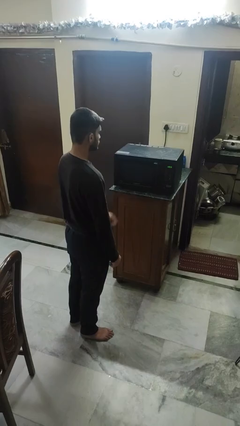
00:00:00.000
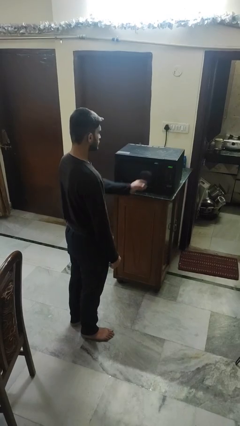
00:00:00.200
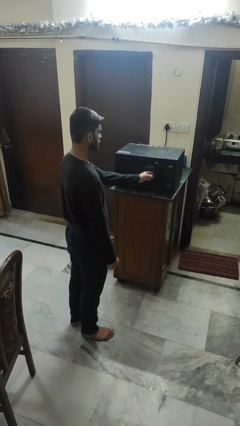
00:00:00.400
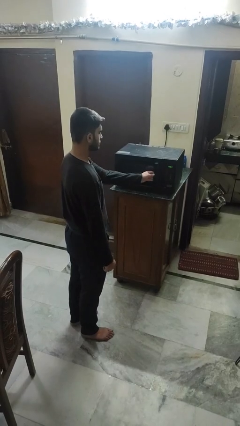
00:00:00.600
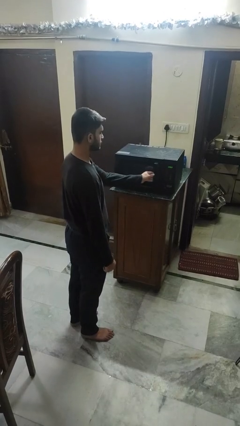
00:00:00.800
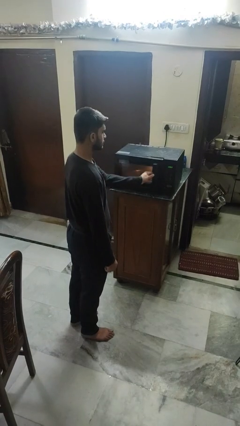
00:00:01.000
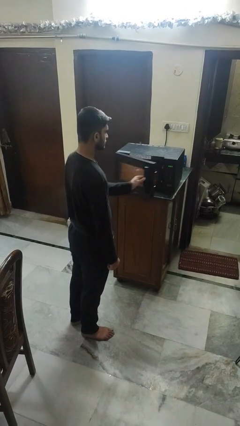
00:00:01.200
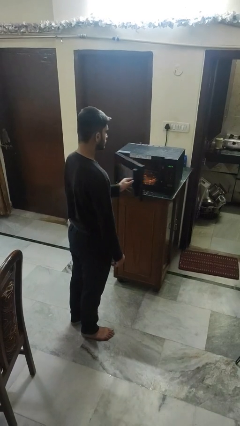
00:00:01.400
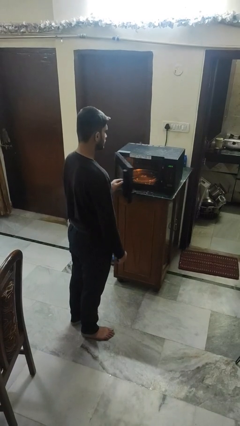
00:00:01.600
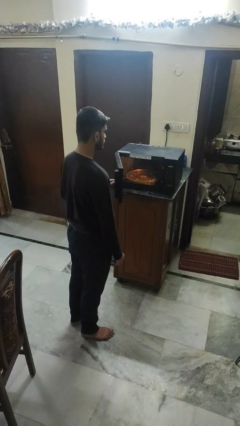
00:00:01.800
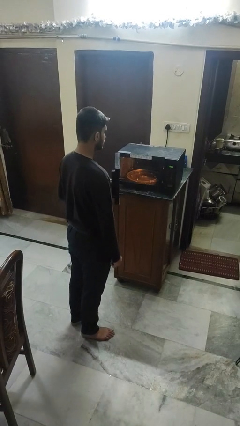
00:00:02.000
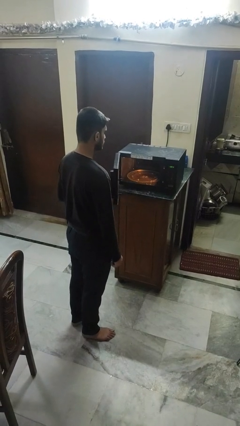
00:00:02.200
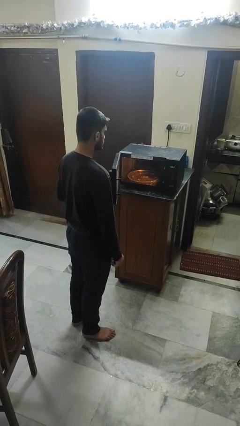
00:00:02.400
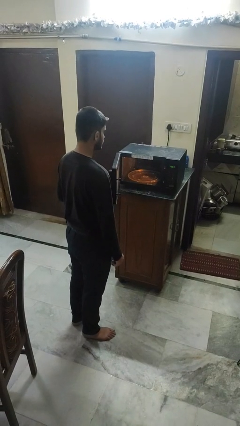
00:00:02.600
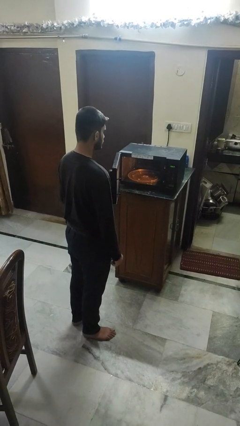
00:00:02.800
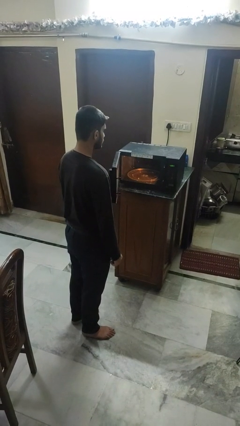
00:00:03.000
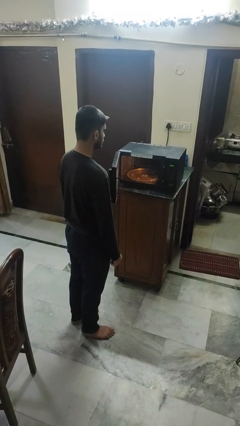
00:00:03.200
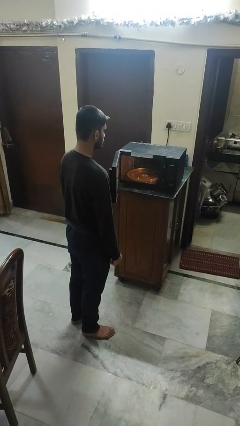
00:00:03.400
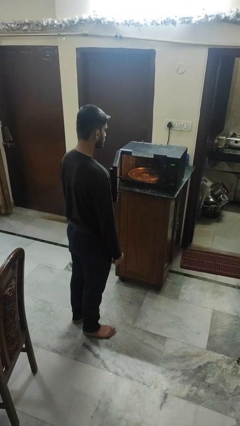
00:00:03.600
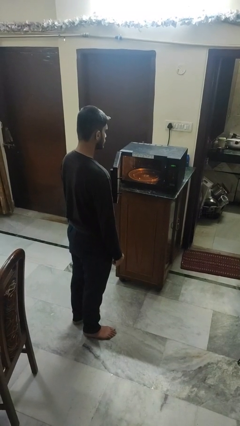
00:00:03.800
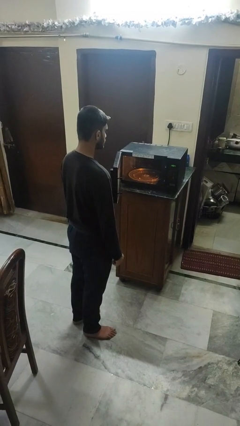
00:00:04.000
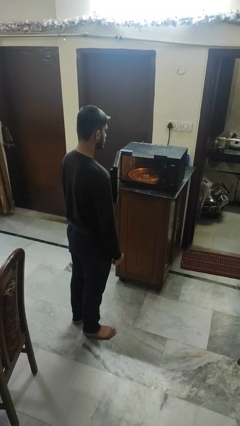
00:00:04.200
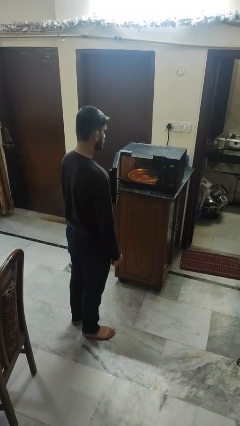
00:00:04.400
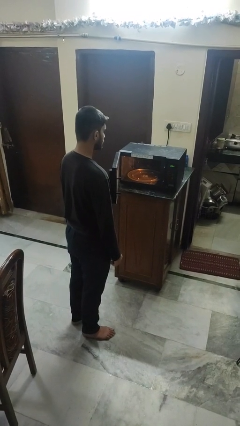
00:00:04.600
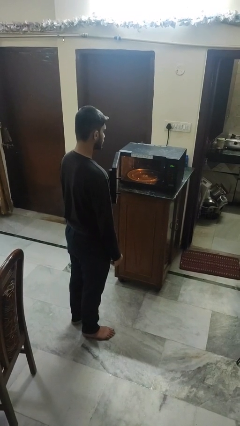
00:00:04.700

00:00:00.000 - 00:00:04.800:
person opens oven door

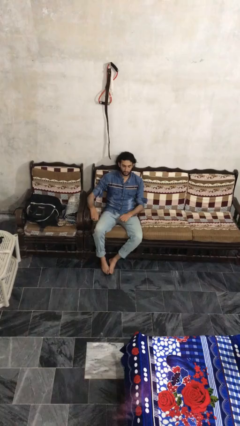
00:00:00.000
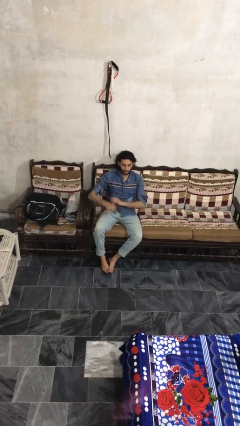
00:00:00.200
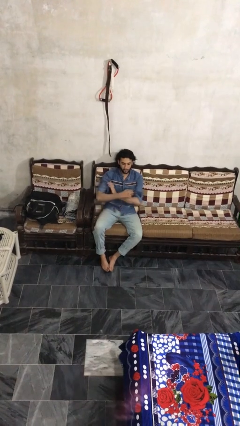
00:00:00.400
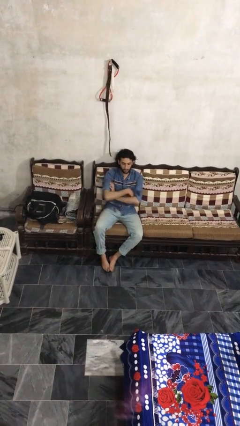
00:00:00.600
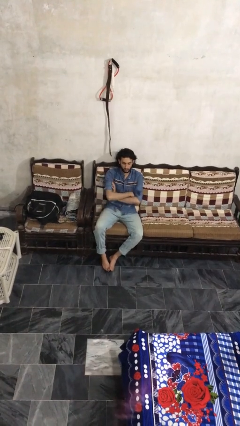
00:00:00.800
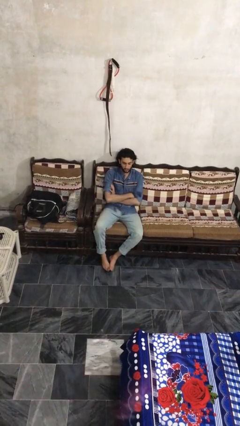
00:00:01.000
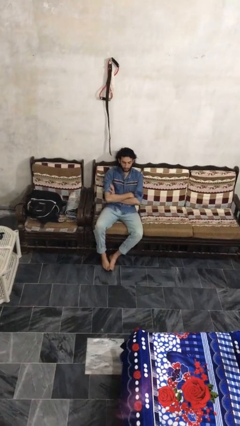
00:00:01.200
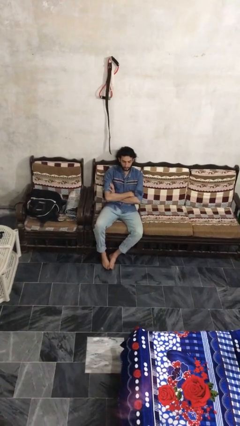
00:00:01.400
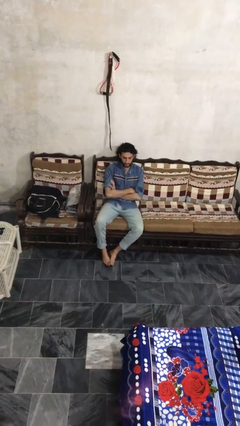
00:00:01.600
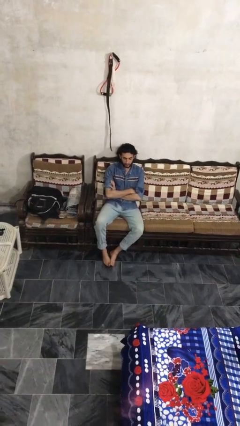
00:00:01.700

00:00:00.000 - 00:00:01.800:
person crosses arms

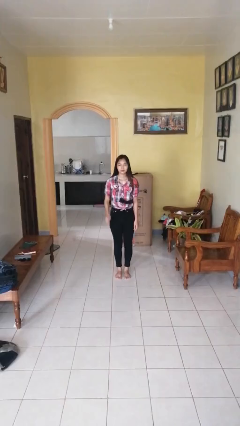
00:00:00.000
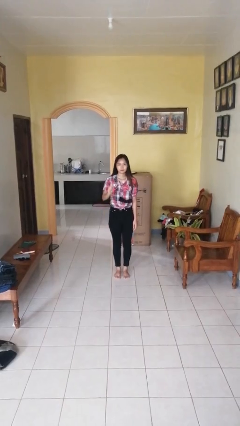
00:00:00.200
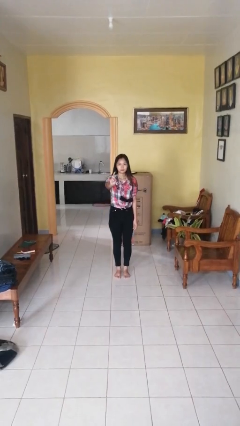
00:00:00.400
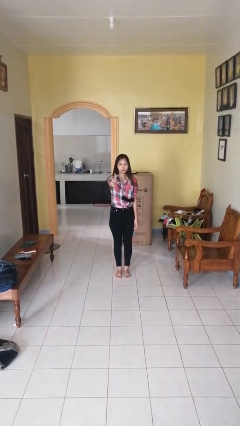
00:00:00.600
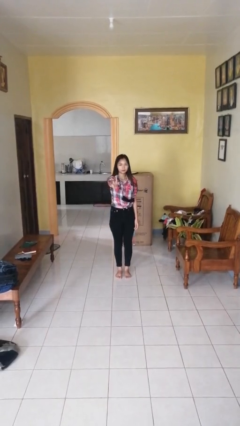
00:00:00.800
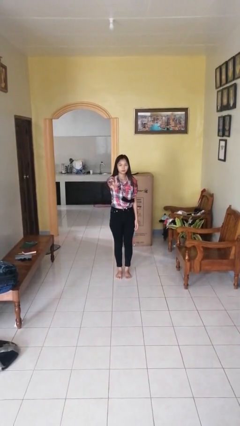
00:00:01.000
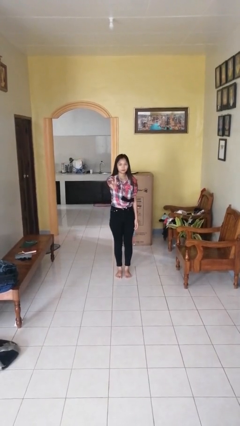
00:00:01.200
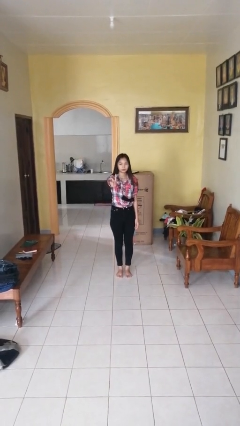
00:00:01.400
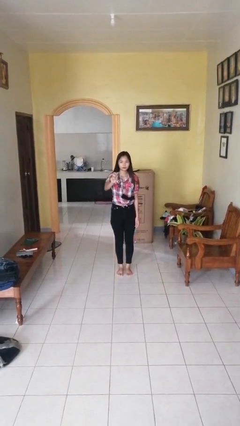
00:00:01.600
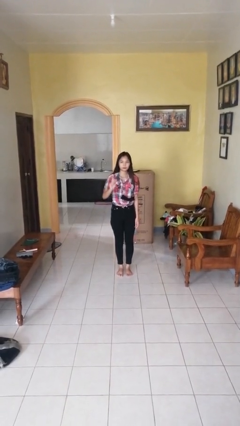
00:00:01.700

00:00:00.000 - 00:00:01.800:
person gestures number one

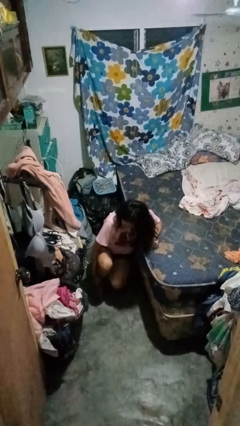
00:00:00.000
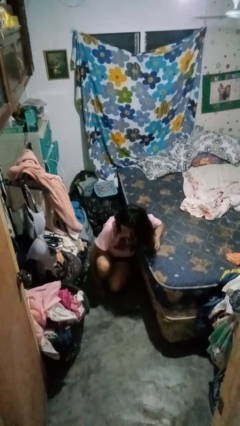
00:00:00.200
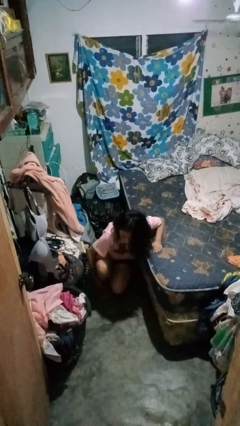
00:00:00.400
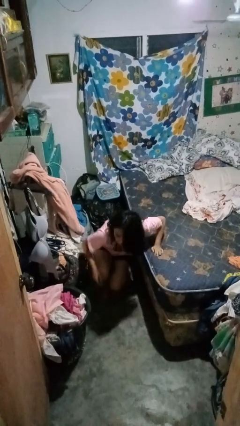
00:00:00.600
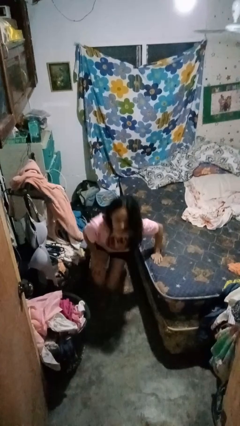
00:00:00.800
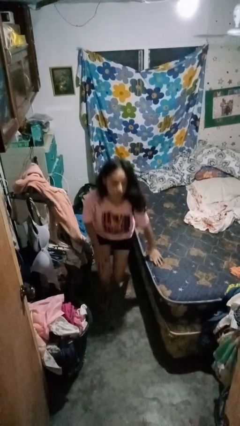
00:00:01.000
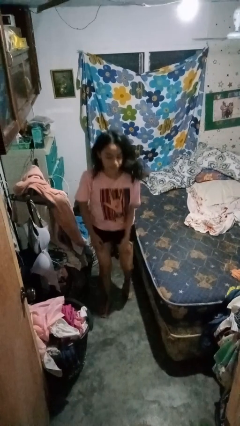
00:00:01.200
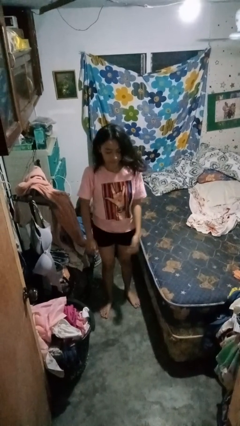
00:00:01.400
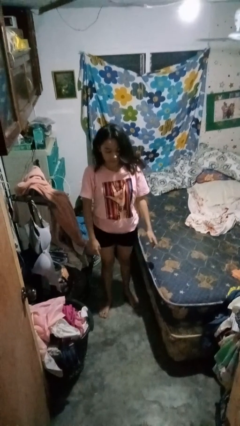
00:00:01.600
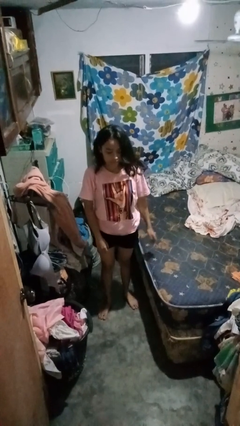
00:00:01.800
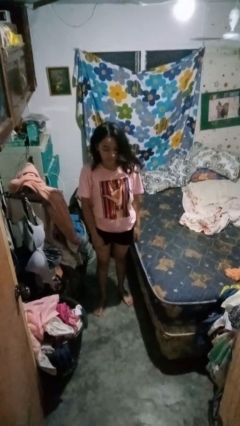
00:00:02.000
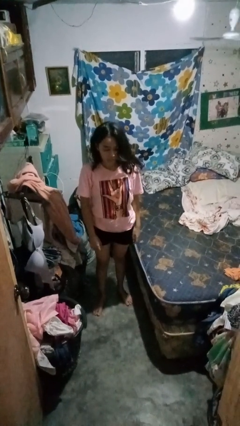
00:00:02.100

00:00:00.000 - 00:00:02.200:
person stands up from floor

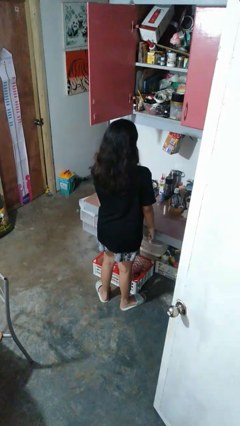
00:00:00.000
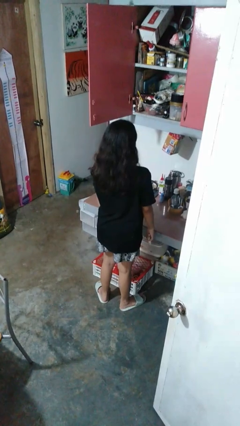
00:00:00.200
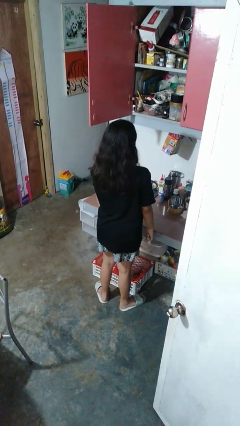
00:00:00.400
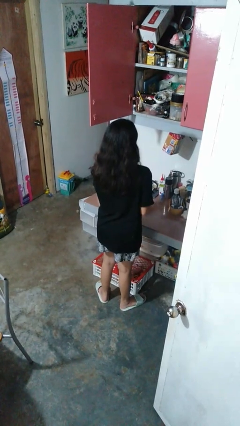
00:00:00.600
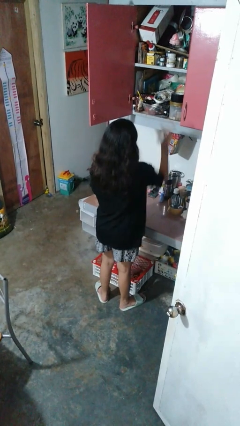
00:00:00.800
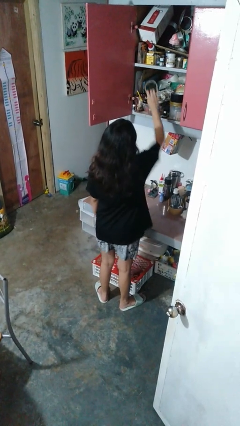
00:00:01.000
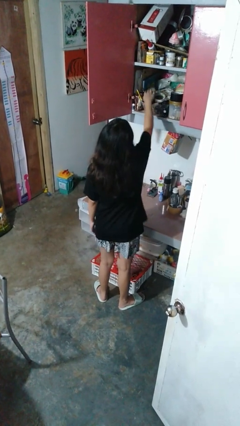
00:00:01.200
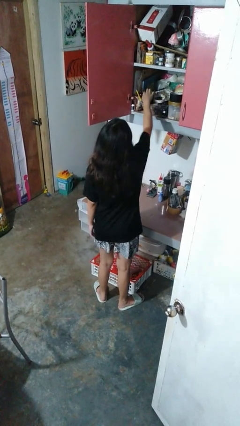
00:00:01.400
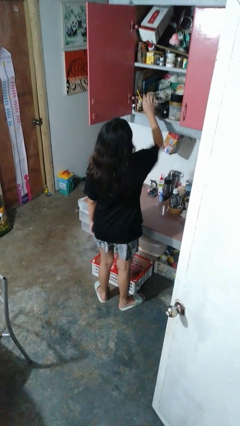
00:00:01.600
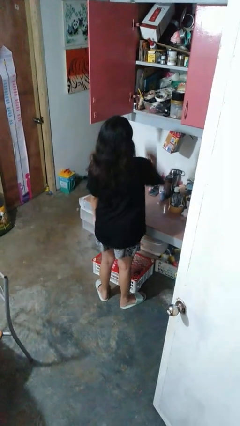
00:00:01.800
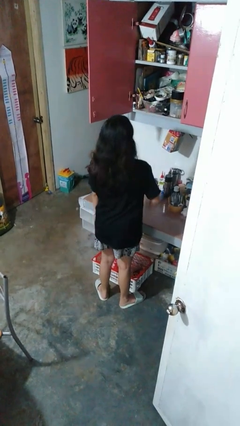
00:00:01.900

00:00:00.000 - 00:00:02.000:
person puts object in cabinet

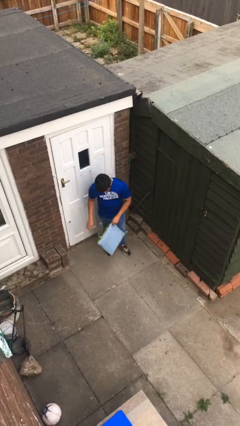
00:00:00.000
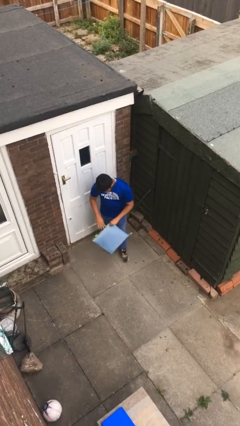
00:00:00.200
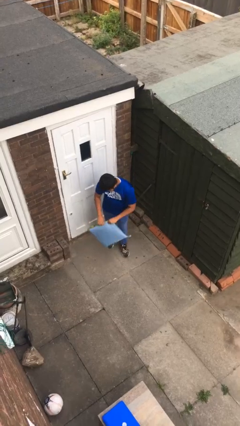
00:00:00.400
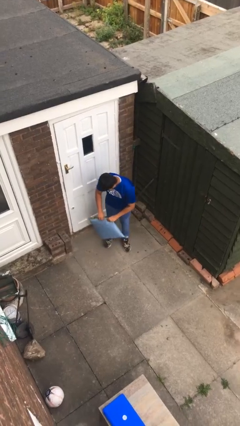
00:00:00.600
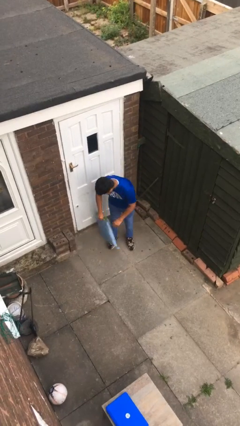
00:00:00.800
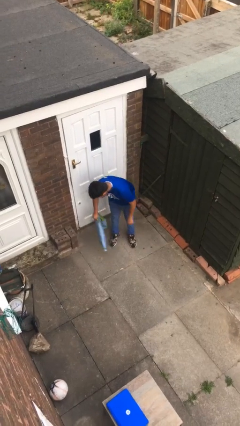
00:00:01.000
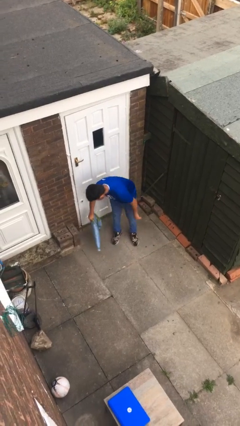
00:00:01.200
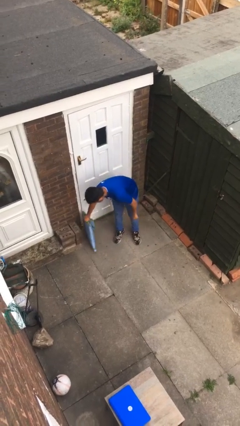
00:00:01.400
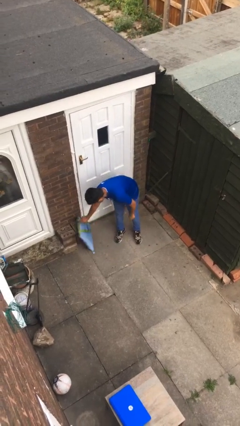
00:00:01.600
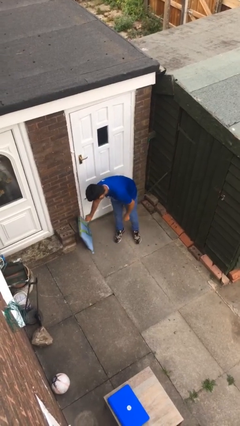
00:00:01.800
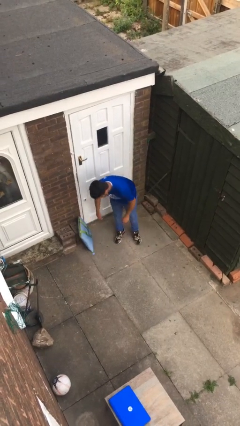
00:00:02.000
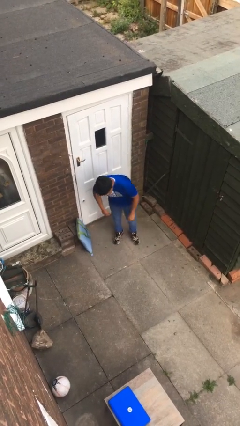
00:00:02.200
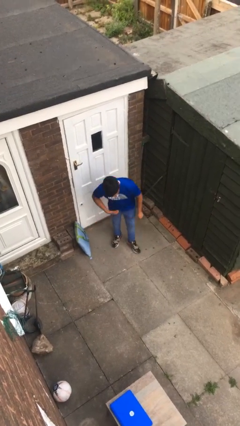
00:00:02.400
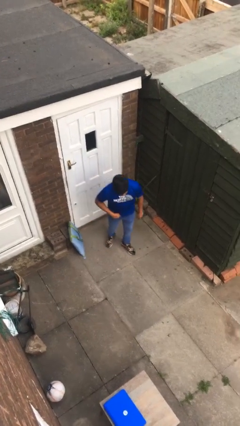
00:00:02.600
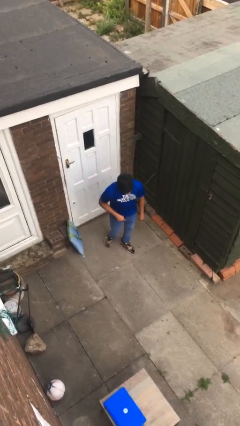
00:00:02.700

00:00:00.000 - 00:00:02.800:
person puts down object on floor

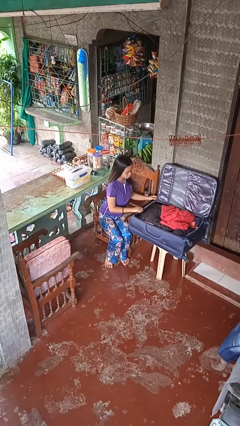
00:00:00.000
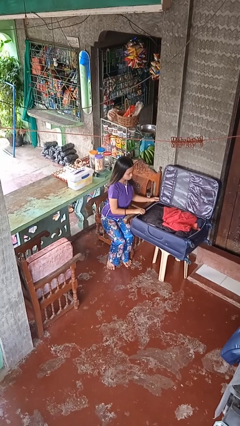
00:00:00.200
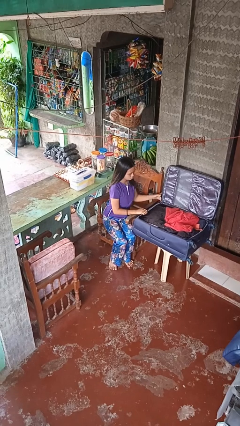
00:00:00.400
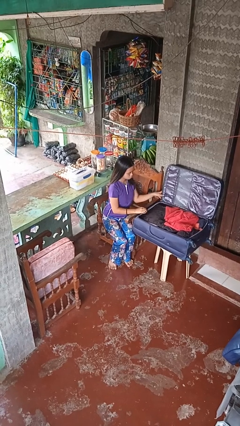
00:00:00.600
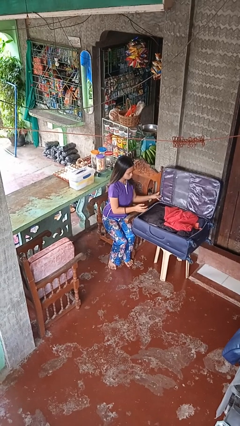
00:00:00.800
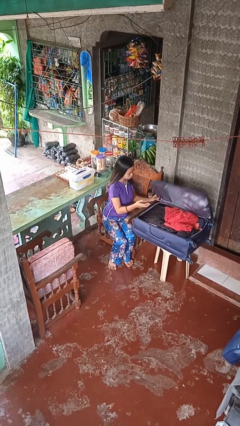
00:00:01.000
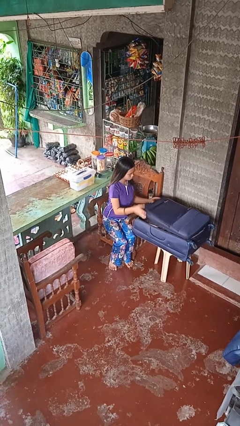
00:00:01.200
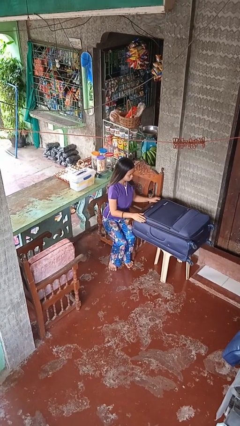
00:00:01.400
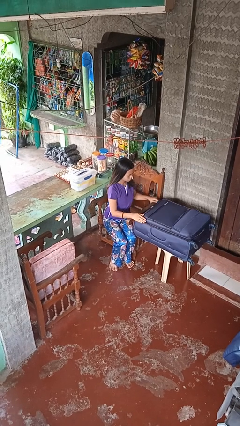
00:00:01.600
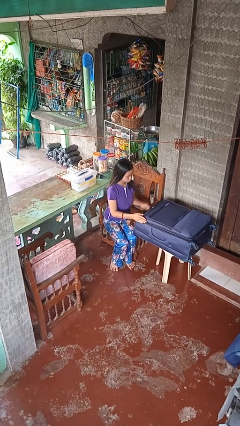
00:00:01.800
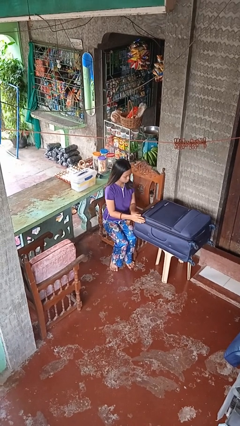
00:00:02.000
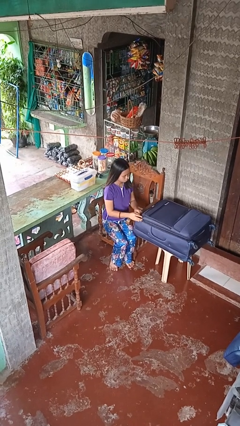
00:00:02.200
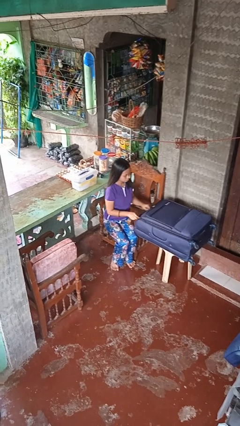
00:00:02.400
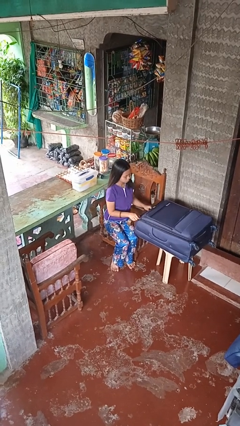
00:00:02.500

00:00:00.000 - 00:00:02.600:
person closes suitcase
